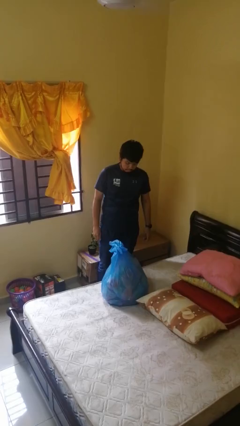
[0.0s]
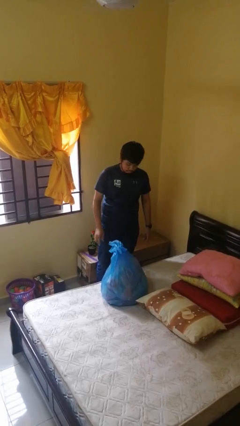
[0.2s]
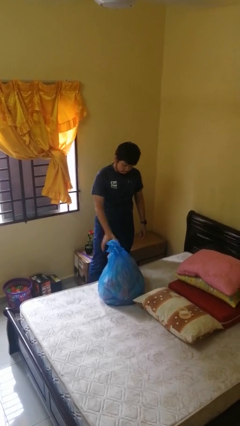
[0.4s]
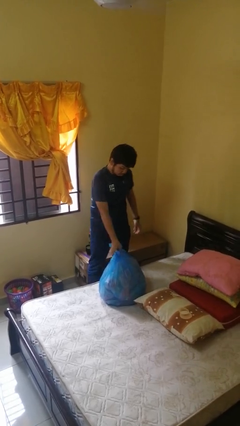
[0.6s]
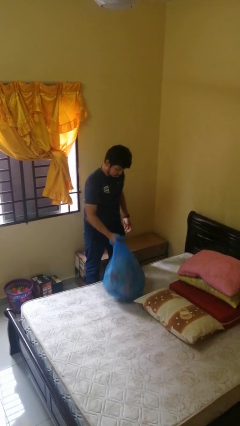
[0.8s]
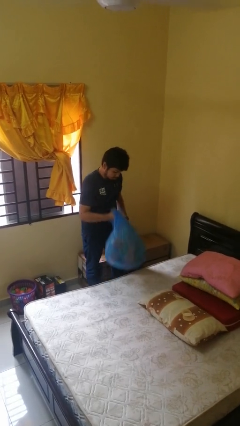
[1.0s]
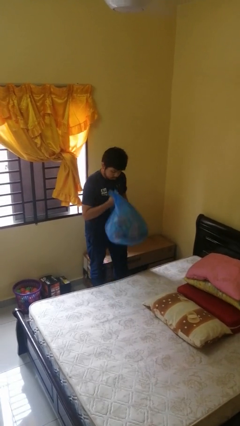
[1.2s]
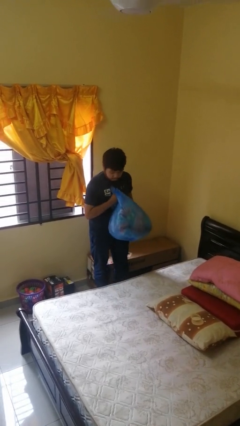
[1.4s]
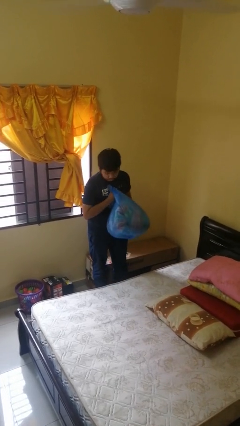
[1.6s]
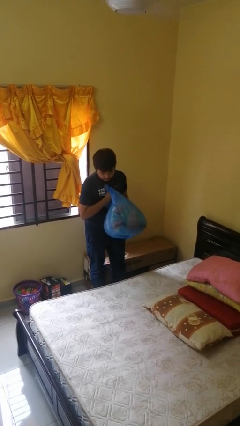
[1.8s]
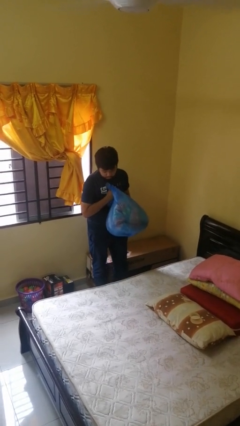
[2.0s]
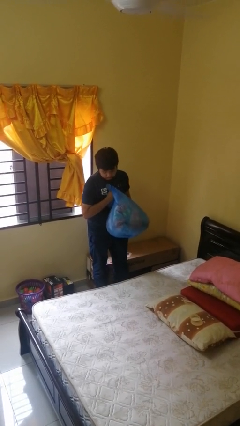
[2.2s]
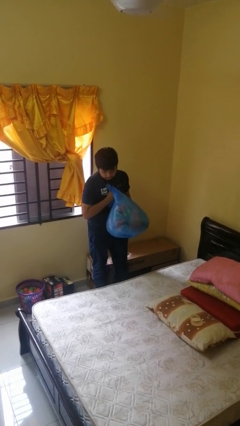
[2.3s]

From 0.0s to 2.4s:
person picks up object from bed

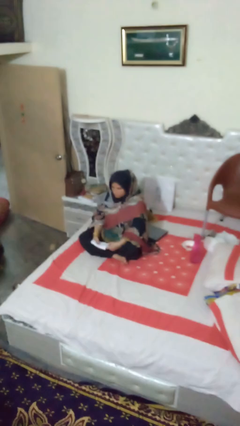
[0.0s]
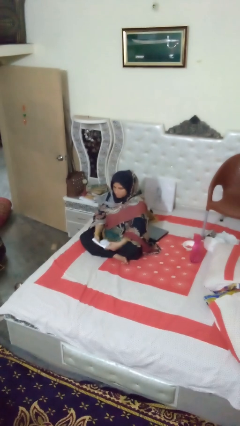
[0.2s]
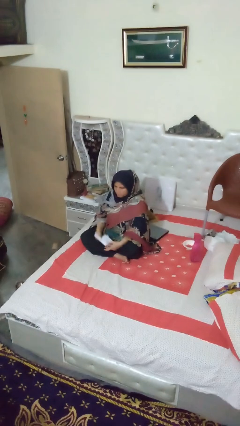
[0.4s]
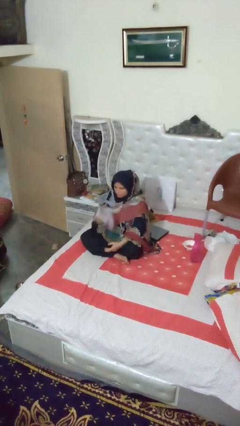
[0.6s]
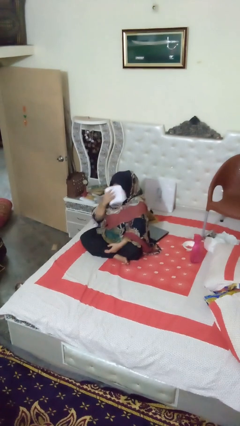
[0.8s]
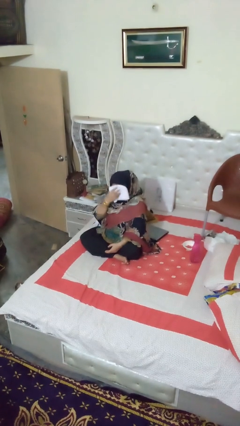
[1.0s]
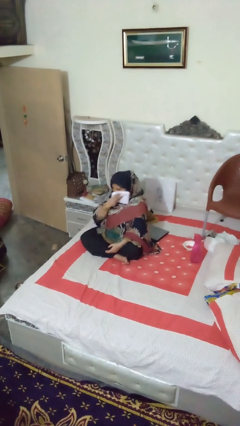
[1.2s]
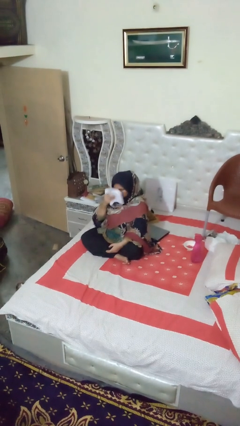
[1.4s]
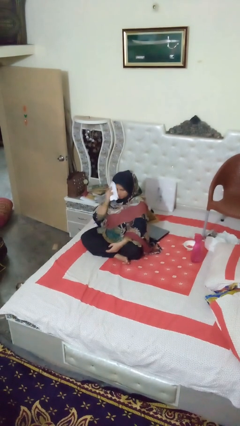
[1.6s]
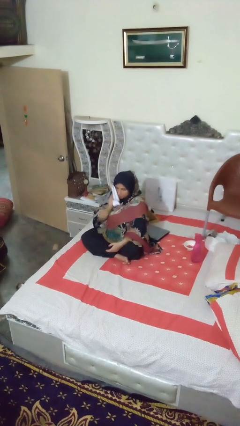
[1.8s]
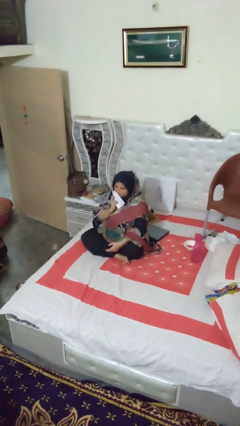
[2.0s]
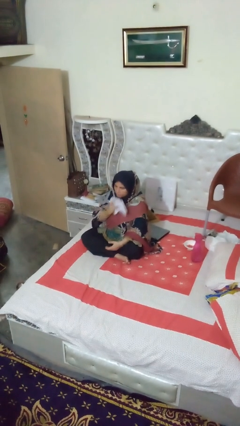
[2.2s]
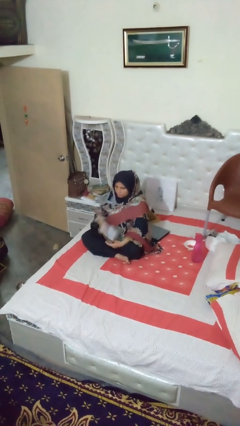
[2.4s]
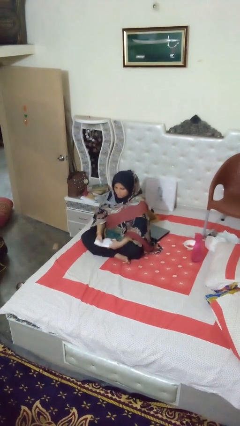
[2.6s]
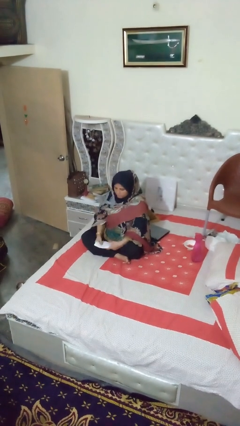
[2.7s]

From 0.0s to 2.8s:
person wipes mouth with napkin

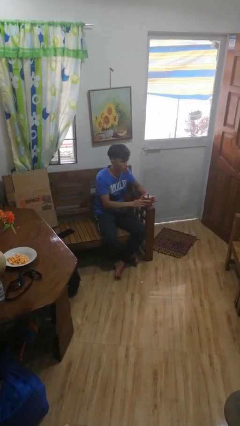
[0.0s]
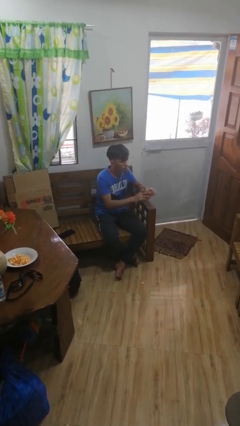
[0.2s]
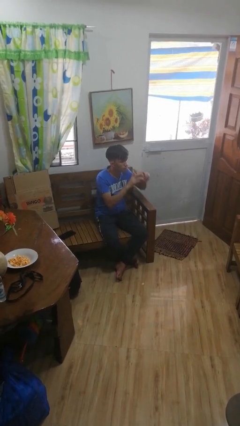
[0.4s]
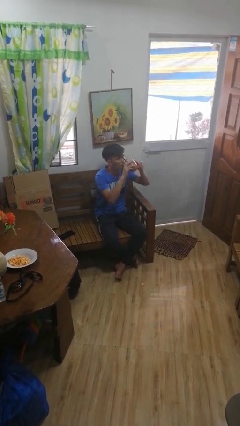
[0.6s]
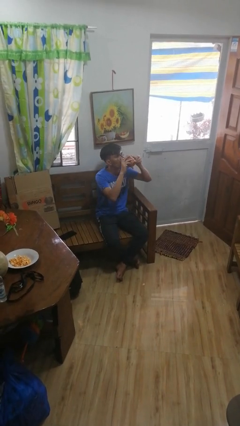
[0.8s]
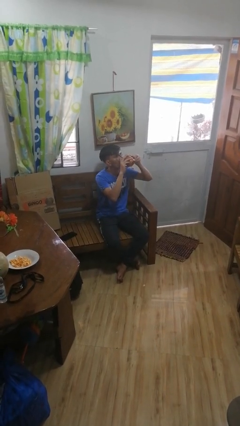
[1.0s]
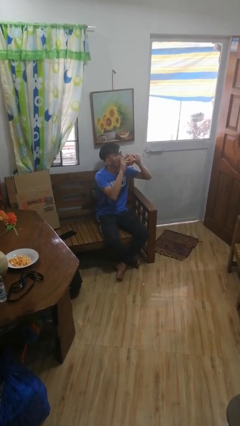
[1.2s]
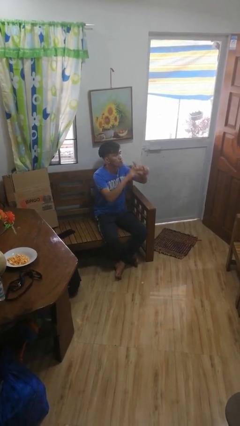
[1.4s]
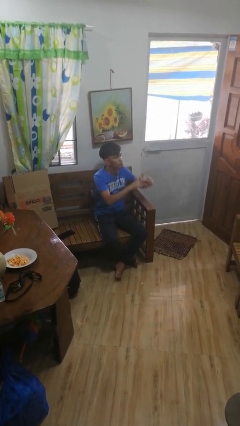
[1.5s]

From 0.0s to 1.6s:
person drinks from mug

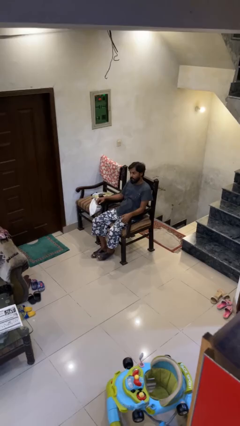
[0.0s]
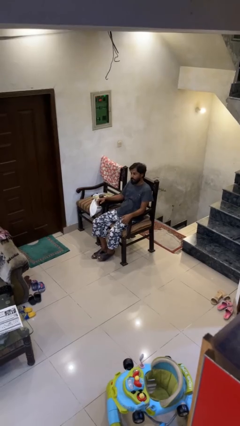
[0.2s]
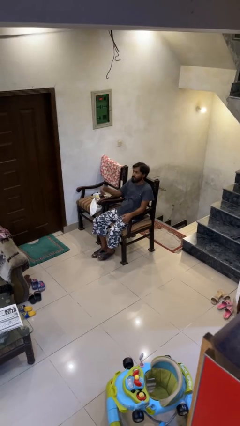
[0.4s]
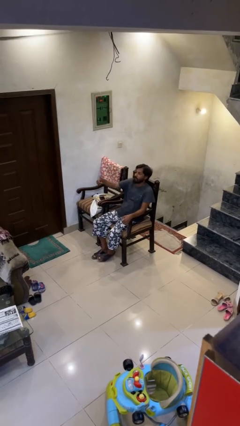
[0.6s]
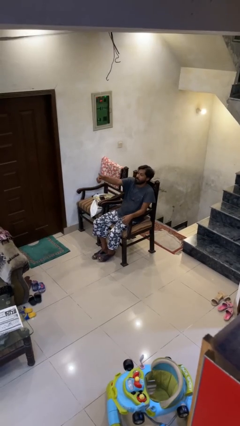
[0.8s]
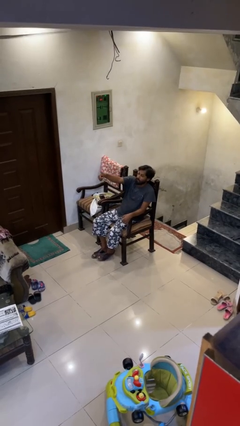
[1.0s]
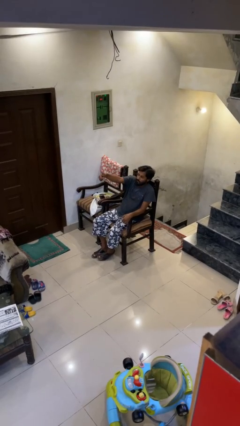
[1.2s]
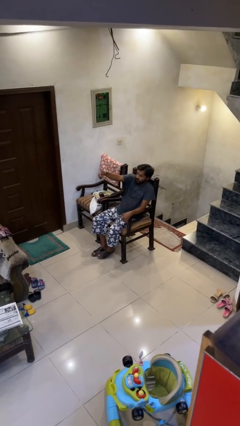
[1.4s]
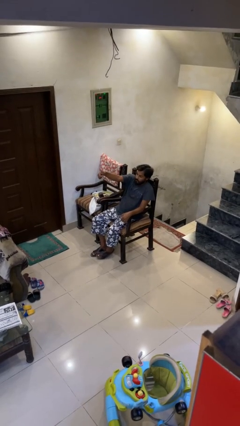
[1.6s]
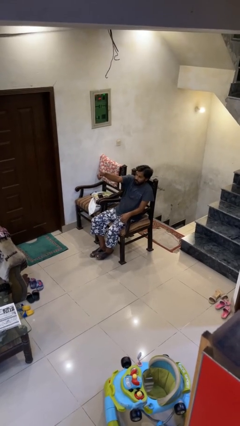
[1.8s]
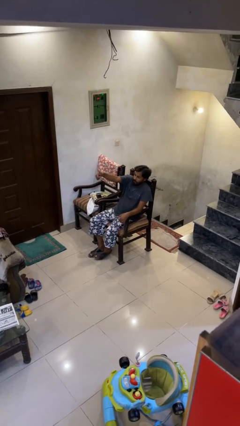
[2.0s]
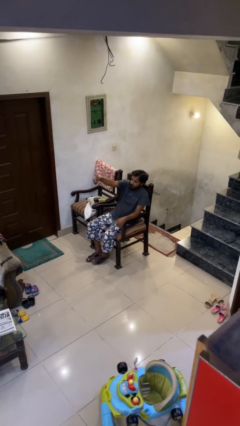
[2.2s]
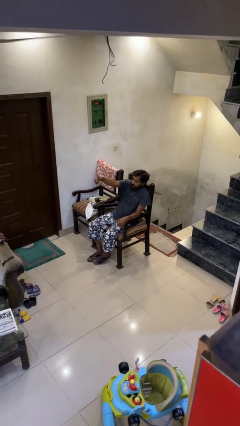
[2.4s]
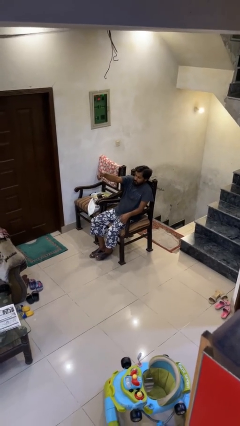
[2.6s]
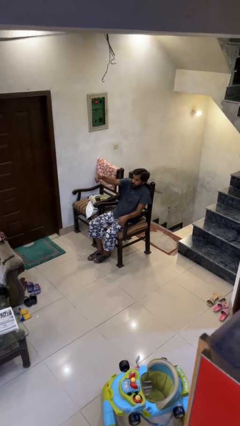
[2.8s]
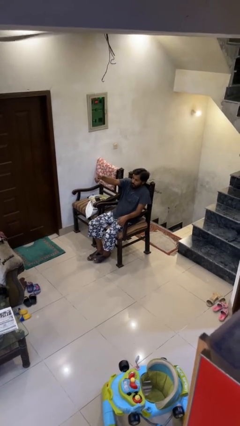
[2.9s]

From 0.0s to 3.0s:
person gestures thumbs up

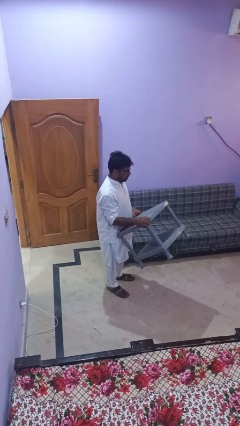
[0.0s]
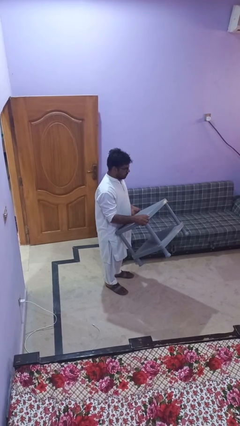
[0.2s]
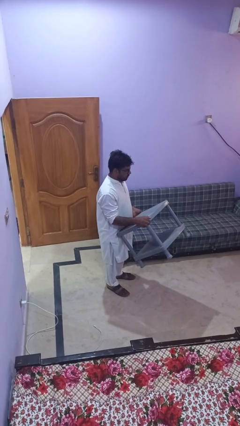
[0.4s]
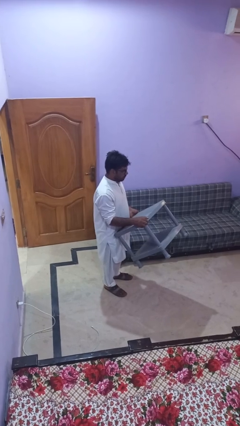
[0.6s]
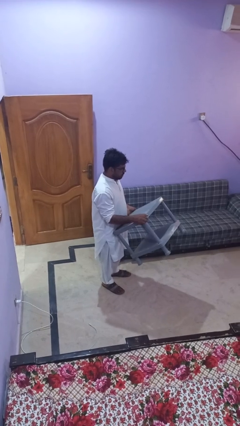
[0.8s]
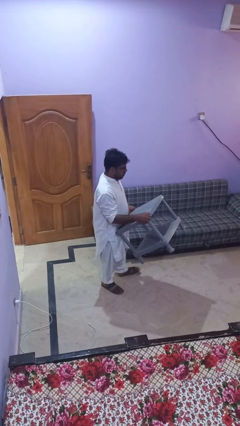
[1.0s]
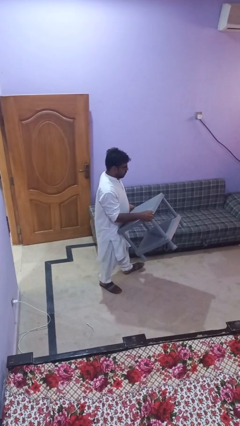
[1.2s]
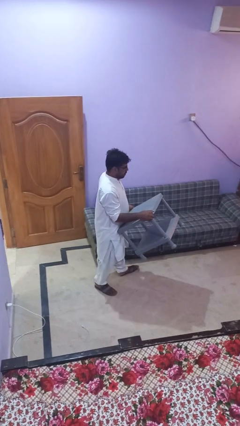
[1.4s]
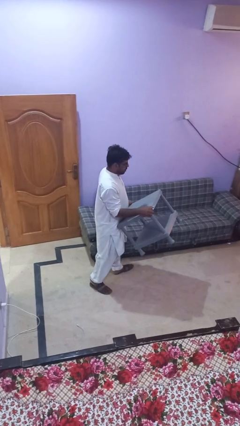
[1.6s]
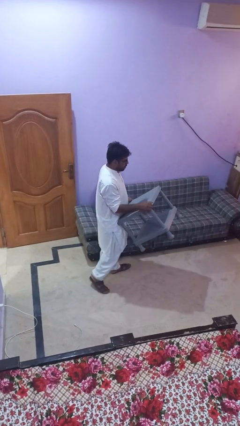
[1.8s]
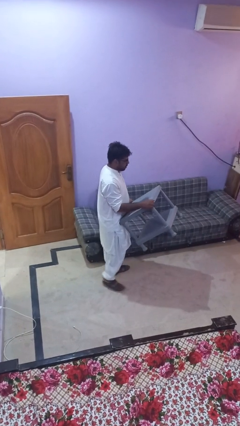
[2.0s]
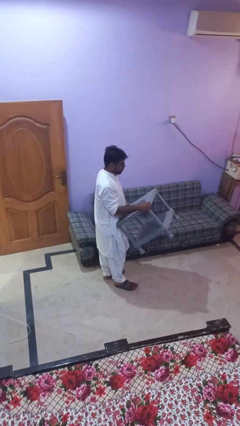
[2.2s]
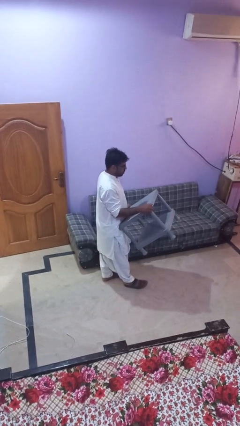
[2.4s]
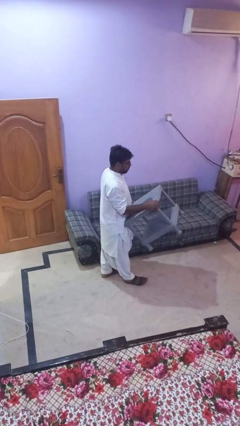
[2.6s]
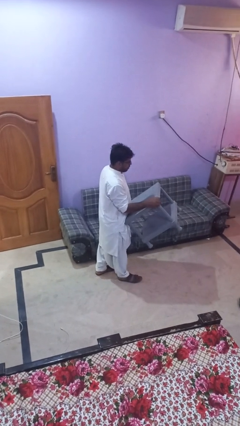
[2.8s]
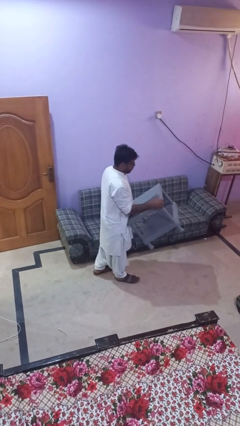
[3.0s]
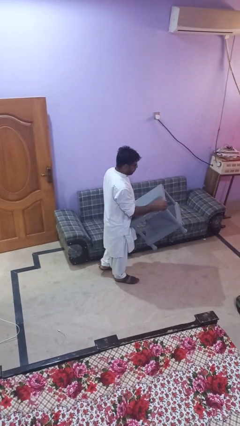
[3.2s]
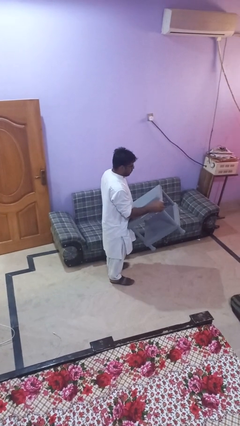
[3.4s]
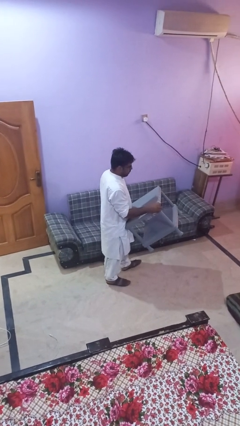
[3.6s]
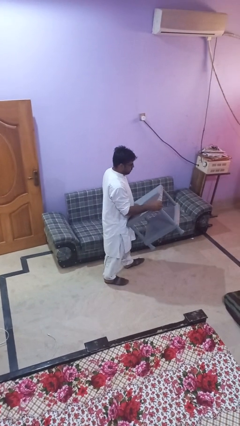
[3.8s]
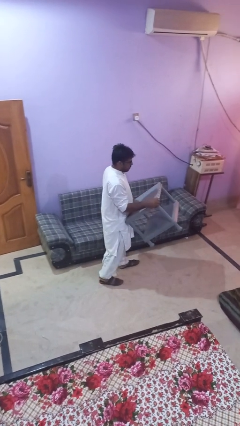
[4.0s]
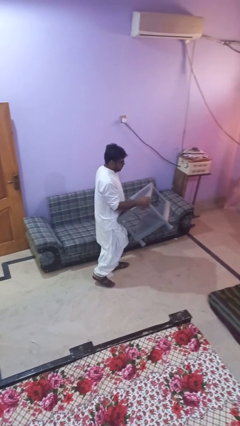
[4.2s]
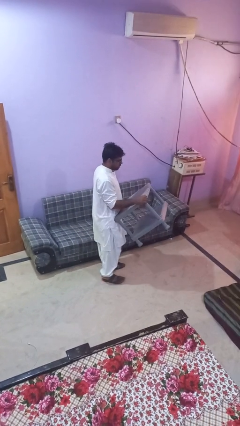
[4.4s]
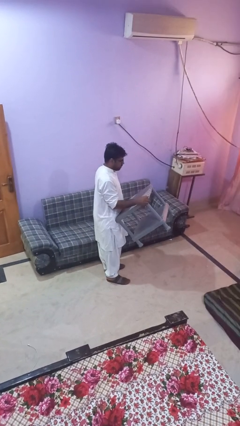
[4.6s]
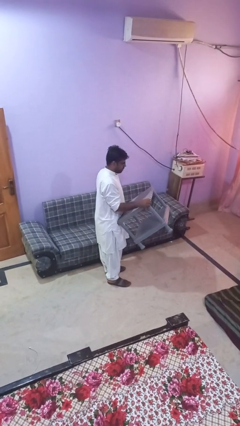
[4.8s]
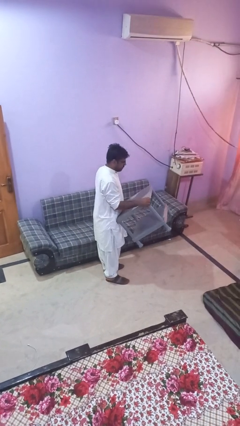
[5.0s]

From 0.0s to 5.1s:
person carries furniture

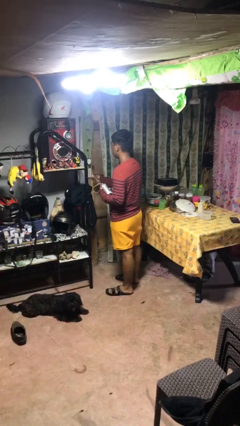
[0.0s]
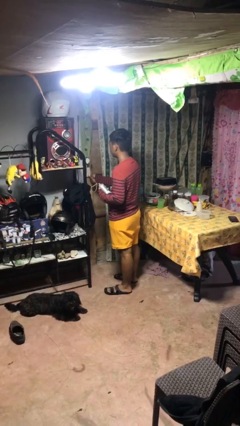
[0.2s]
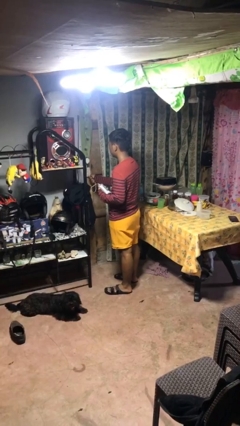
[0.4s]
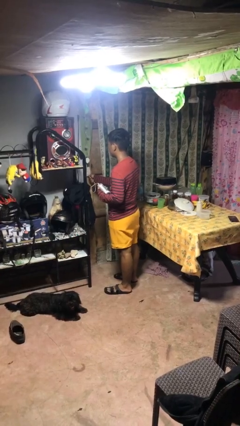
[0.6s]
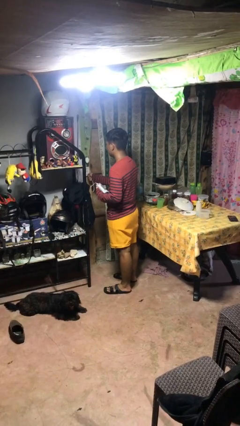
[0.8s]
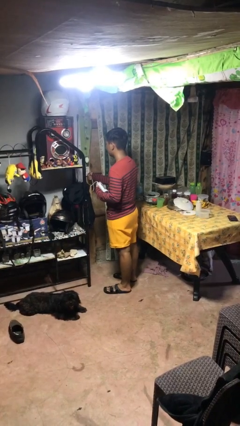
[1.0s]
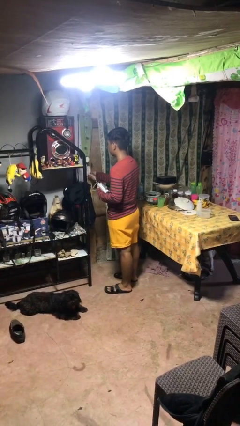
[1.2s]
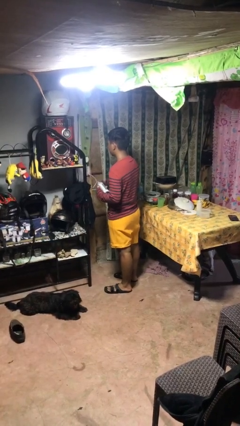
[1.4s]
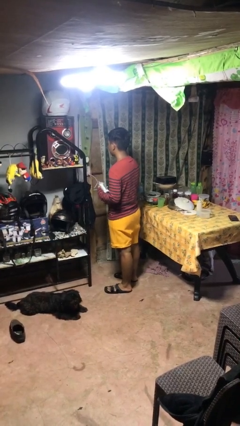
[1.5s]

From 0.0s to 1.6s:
person plugs into electrical socket

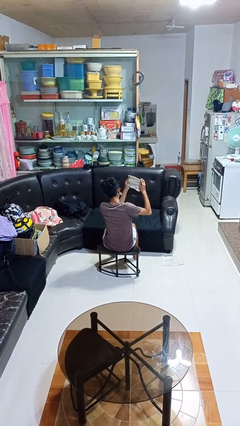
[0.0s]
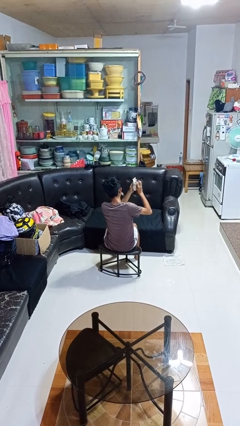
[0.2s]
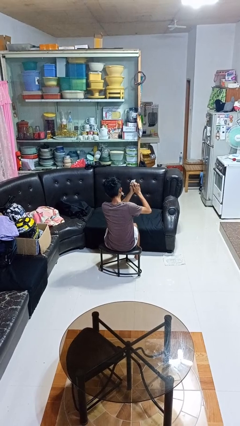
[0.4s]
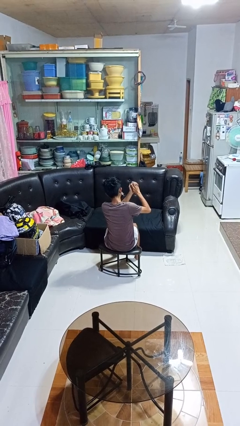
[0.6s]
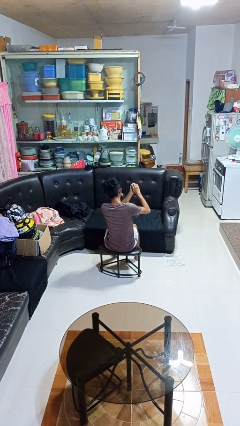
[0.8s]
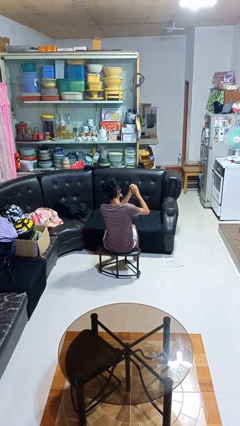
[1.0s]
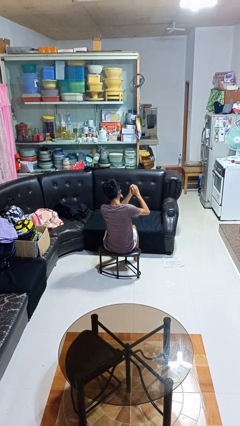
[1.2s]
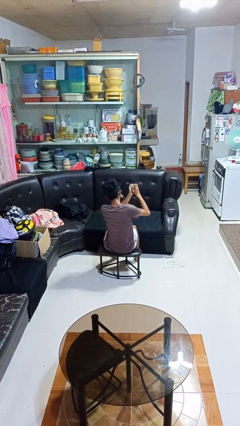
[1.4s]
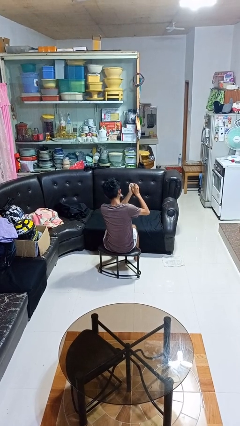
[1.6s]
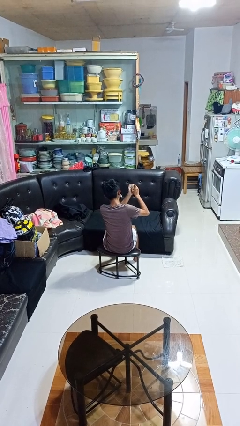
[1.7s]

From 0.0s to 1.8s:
person crumples paper
